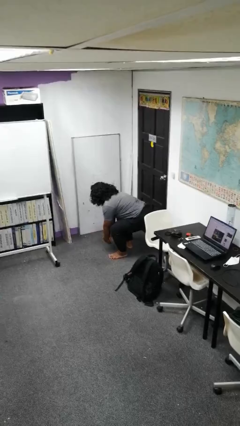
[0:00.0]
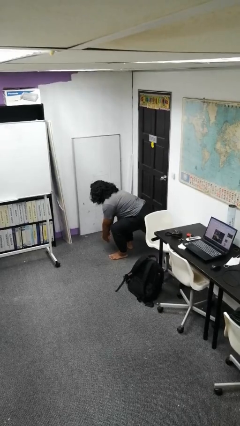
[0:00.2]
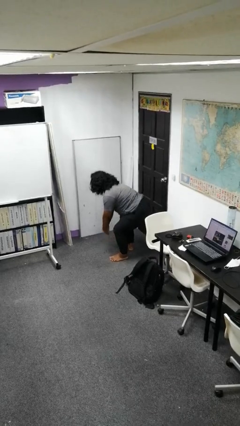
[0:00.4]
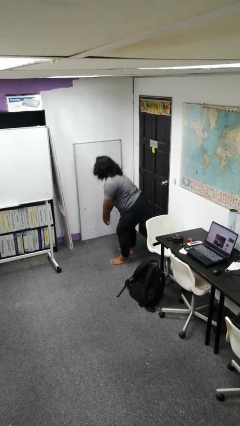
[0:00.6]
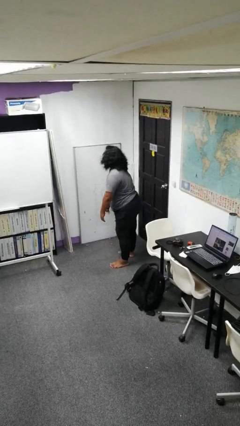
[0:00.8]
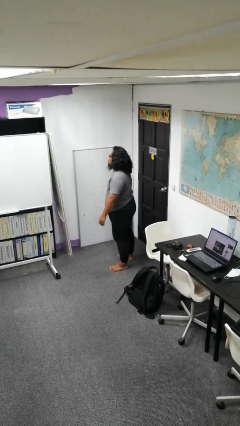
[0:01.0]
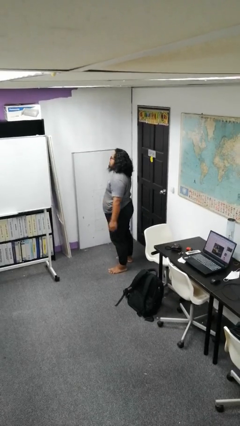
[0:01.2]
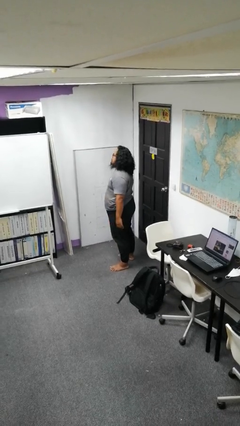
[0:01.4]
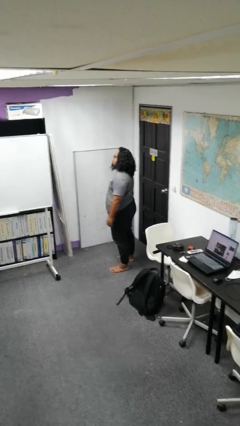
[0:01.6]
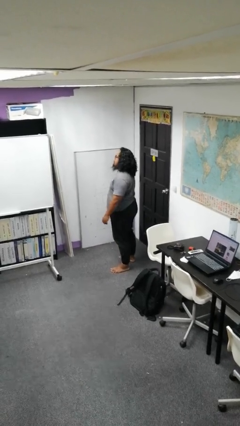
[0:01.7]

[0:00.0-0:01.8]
person stands up

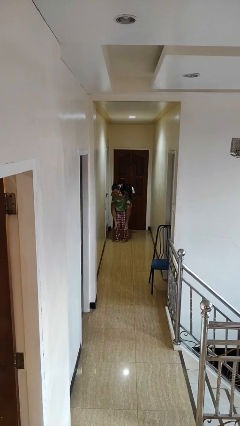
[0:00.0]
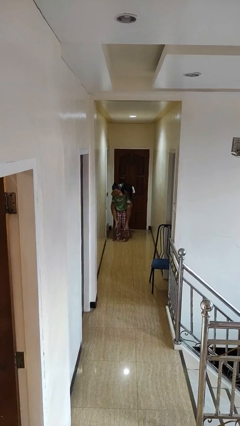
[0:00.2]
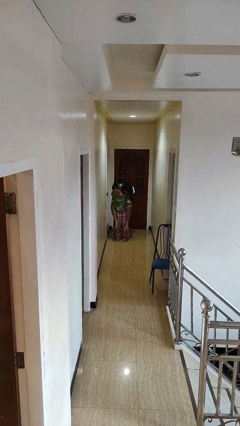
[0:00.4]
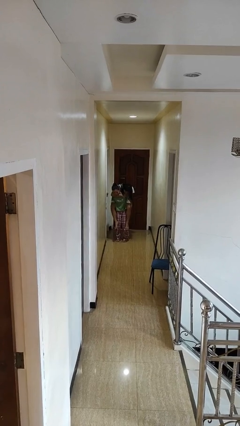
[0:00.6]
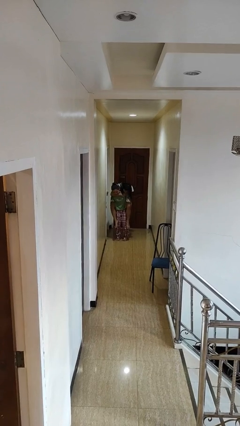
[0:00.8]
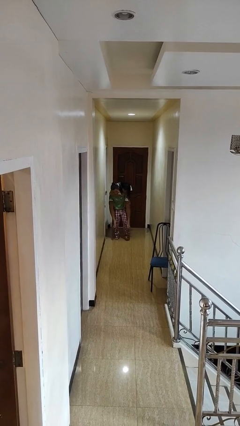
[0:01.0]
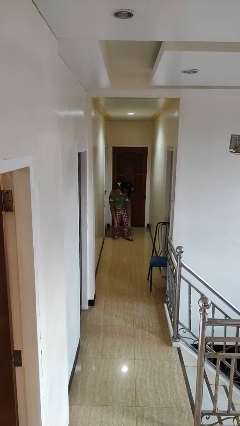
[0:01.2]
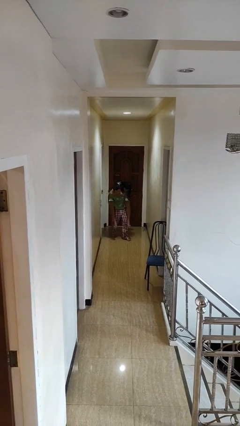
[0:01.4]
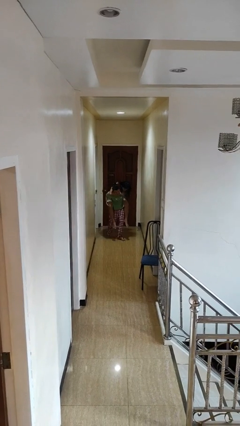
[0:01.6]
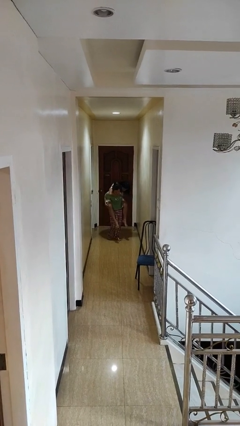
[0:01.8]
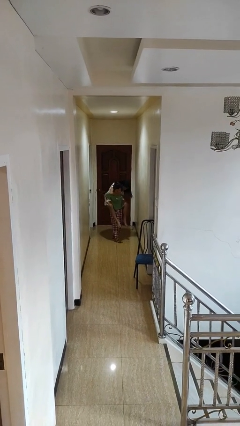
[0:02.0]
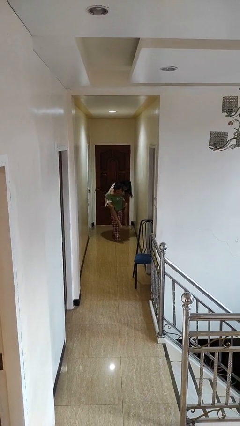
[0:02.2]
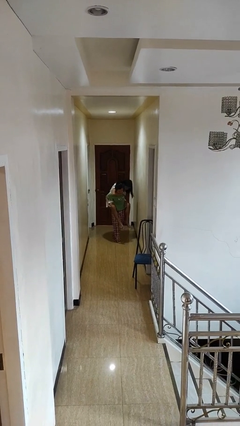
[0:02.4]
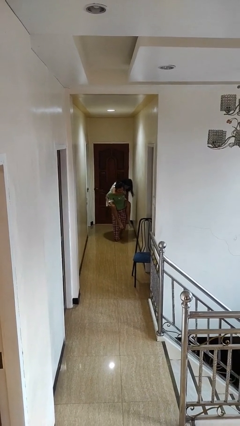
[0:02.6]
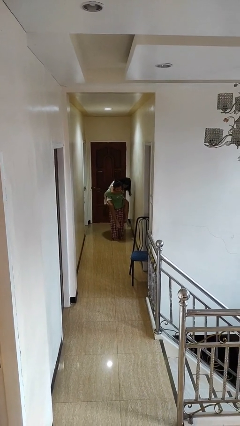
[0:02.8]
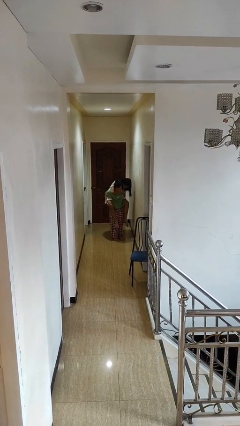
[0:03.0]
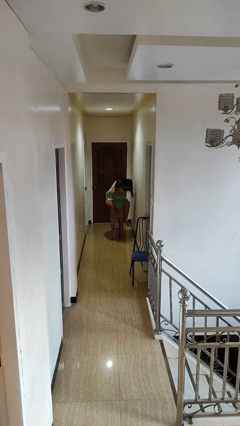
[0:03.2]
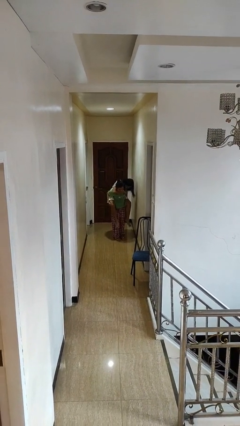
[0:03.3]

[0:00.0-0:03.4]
person carries person on back

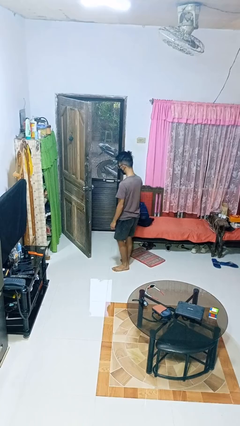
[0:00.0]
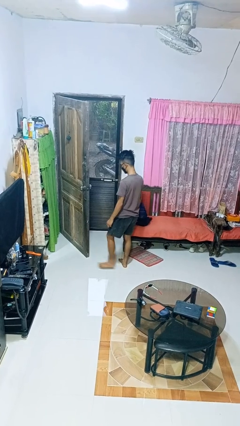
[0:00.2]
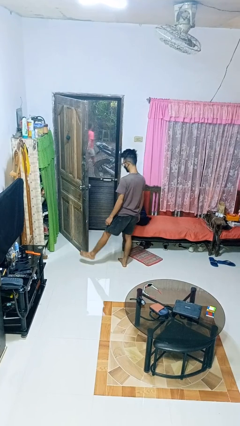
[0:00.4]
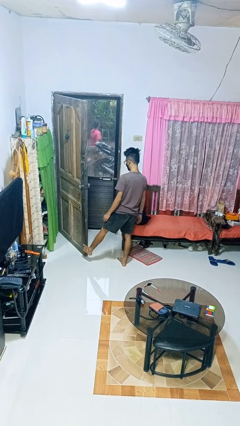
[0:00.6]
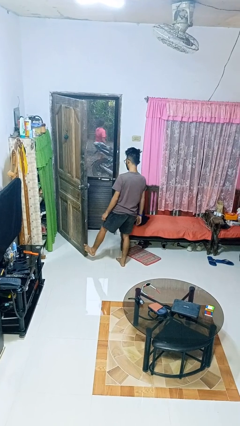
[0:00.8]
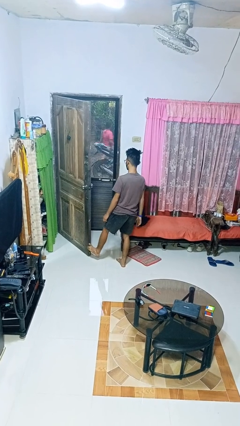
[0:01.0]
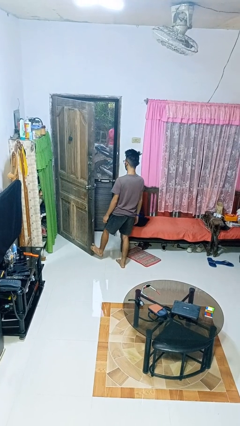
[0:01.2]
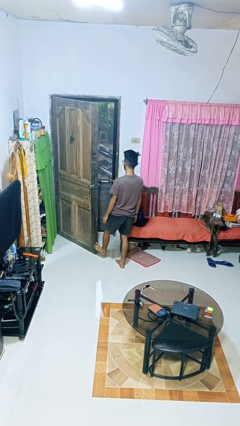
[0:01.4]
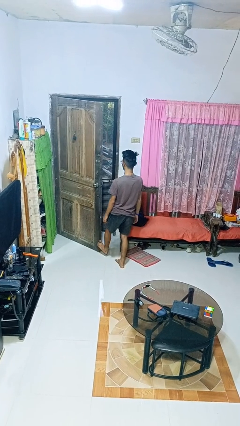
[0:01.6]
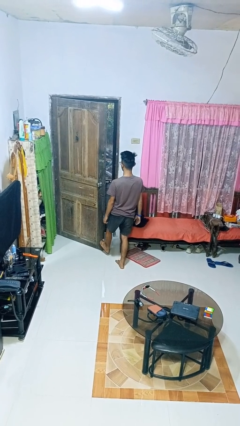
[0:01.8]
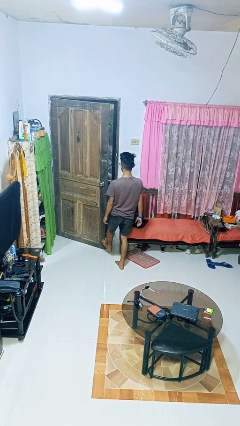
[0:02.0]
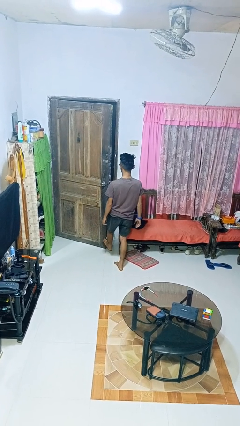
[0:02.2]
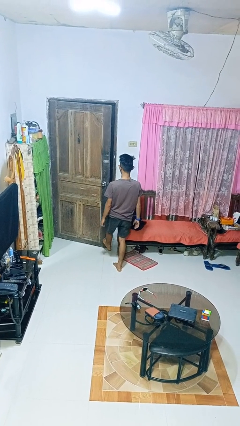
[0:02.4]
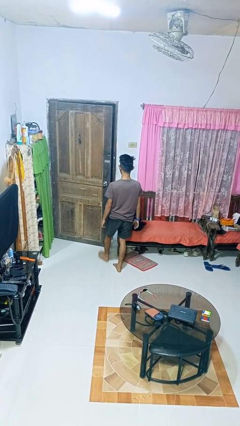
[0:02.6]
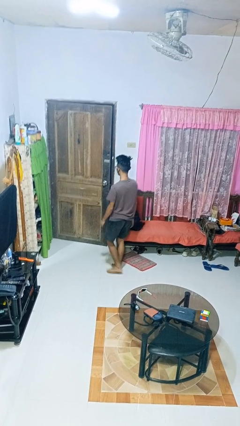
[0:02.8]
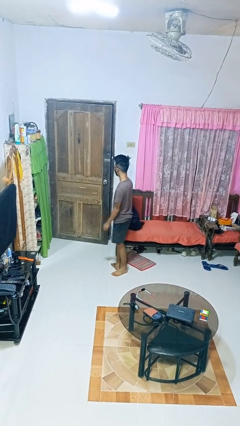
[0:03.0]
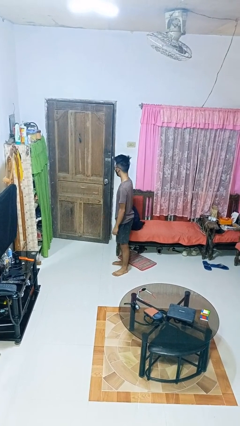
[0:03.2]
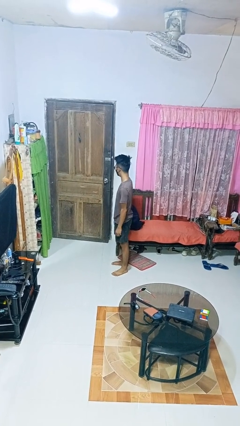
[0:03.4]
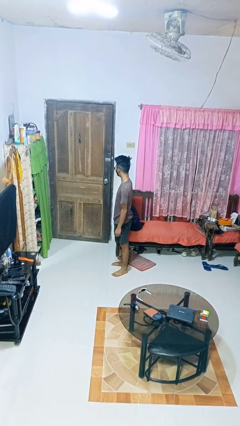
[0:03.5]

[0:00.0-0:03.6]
person closes door with foot

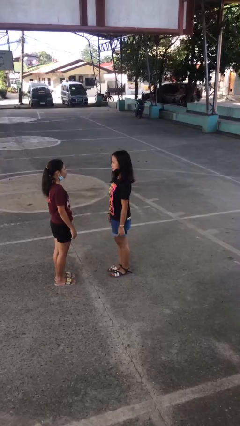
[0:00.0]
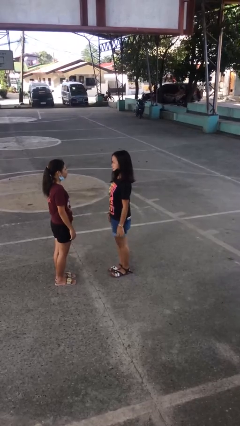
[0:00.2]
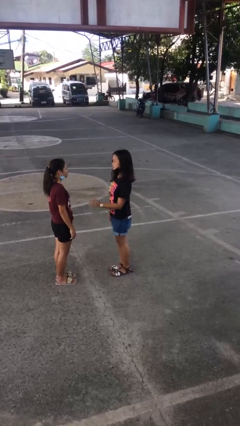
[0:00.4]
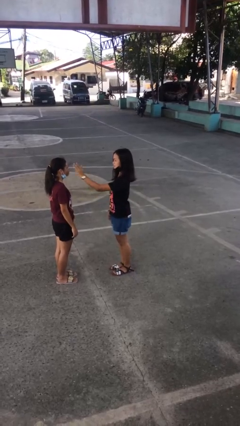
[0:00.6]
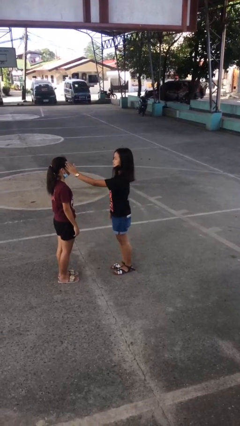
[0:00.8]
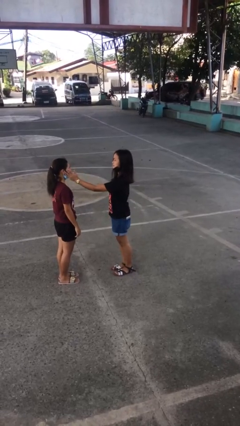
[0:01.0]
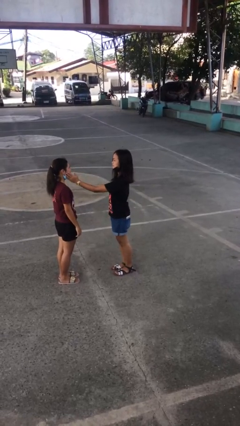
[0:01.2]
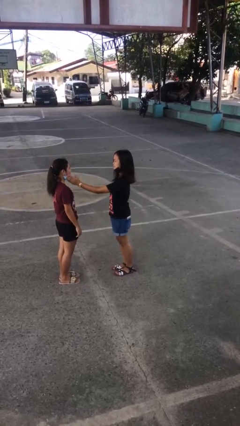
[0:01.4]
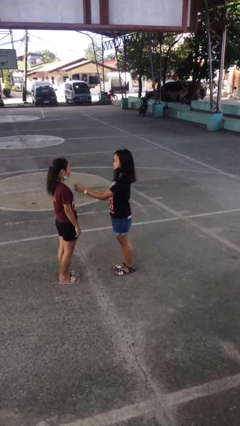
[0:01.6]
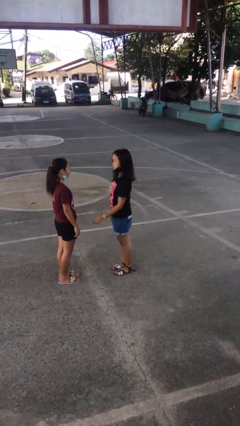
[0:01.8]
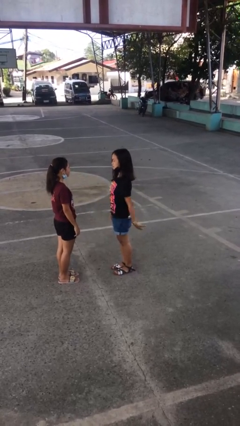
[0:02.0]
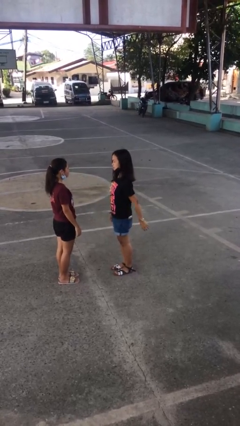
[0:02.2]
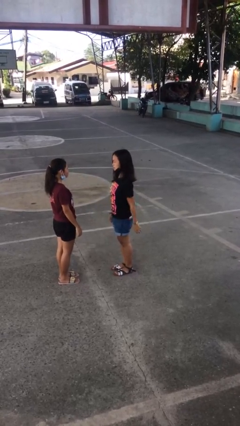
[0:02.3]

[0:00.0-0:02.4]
person touches face of person

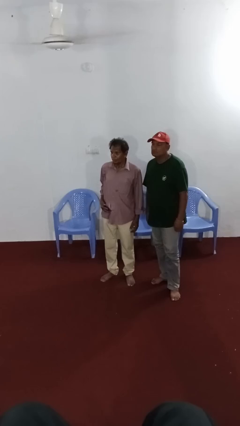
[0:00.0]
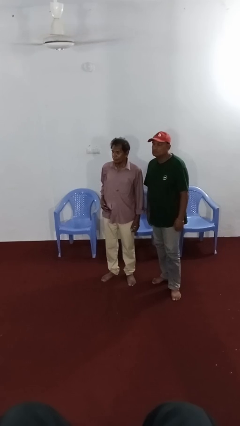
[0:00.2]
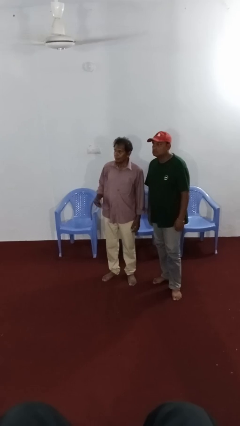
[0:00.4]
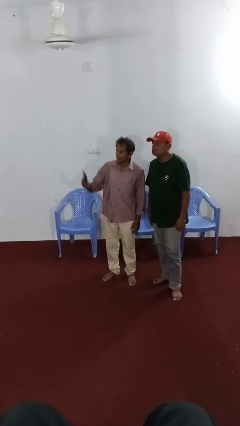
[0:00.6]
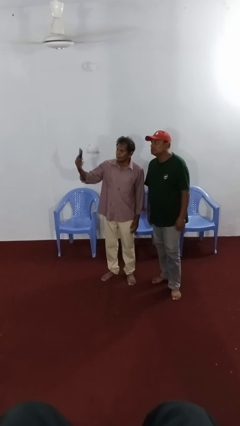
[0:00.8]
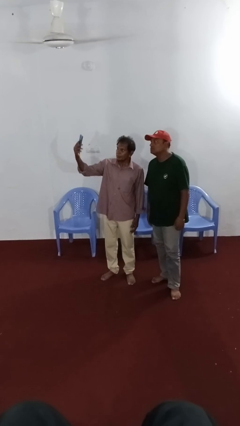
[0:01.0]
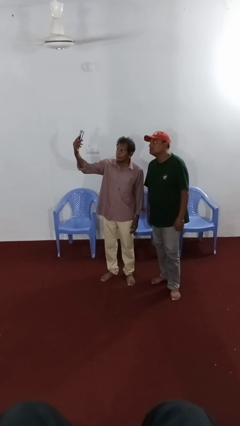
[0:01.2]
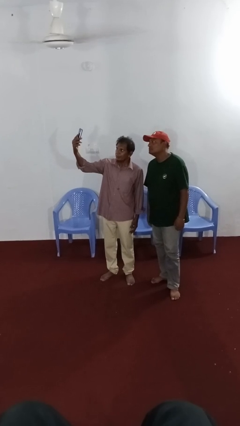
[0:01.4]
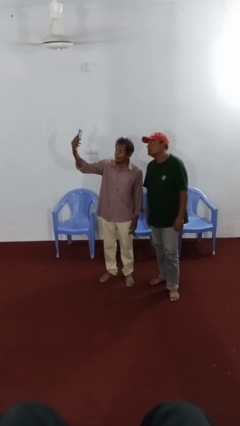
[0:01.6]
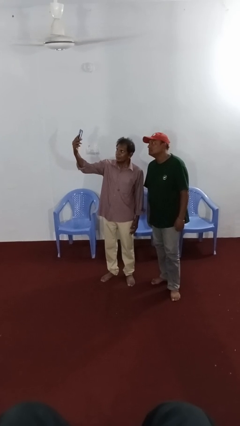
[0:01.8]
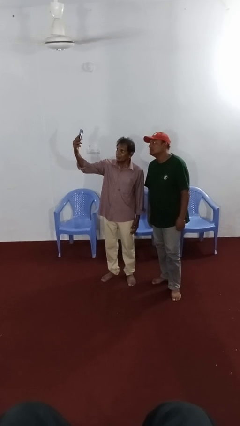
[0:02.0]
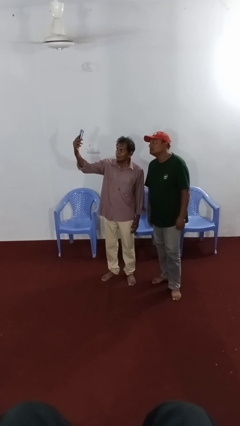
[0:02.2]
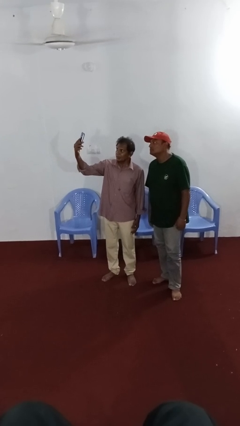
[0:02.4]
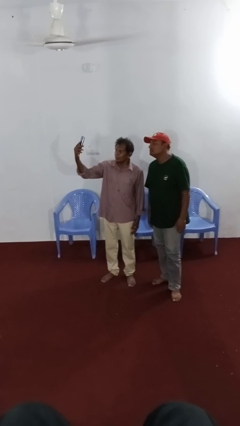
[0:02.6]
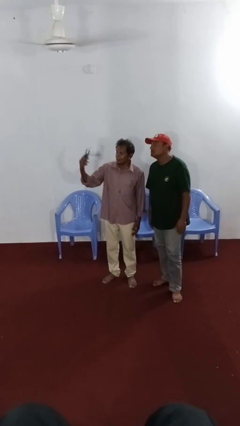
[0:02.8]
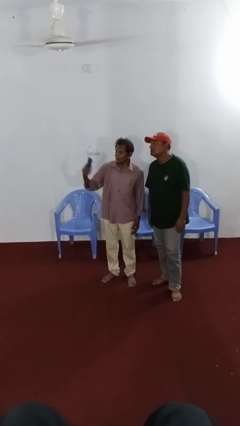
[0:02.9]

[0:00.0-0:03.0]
person takes selfie with person

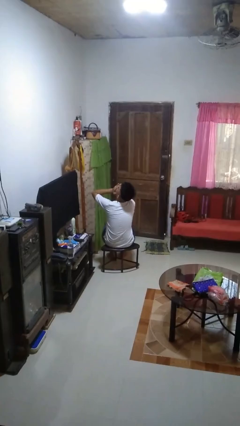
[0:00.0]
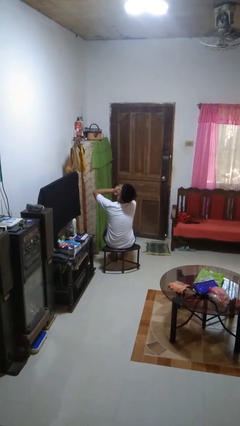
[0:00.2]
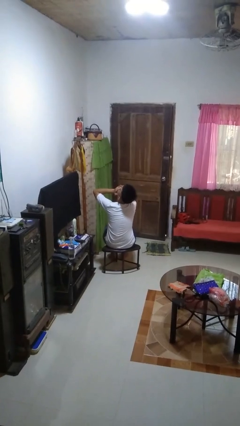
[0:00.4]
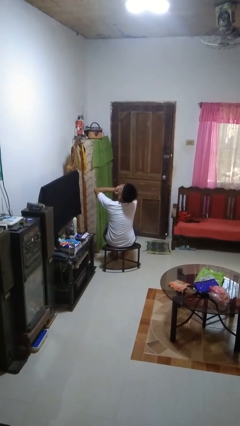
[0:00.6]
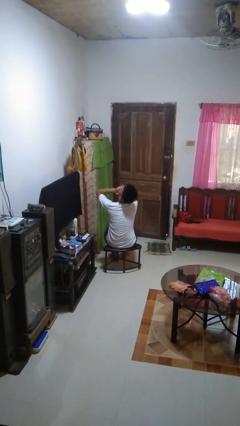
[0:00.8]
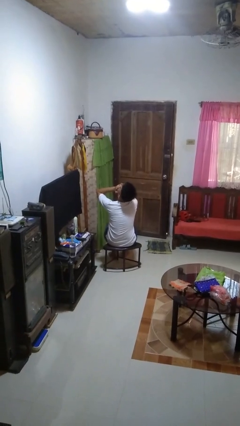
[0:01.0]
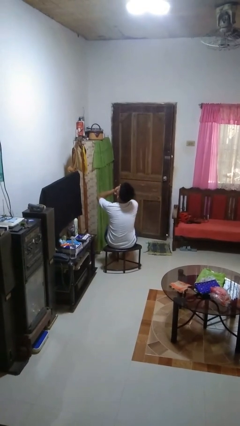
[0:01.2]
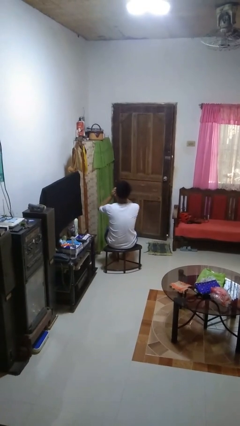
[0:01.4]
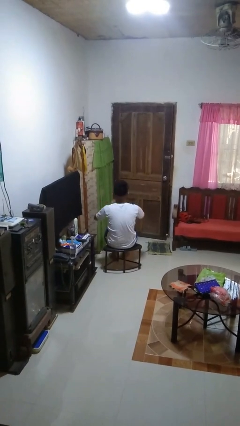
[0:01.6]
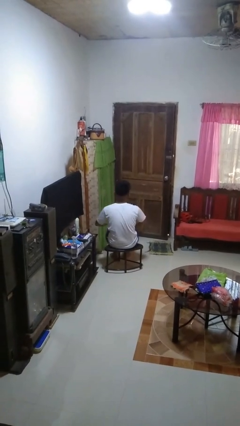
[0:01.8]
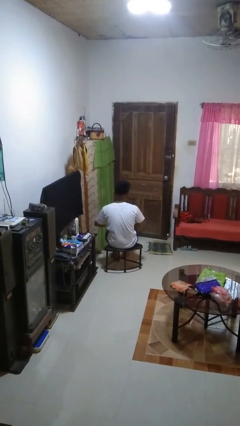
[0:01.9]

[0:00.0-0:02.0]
person yawns

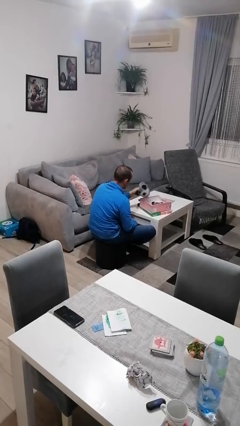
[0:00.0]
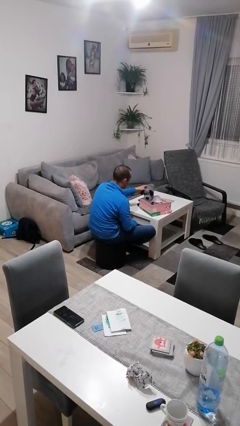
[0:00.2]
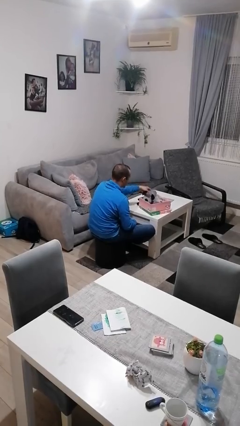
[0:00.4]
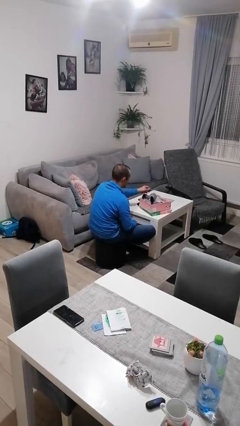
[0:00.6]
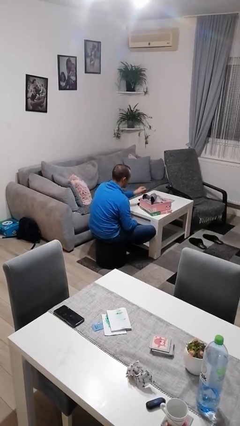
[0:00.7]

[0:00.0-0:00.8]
person puts object into box
